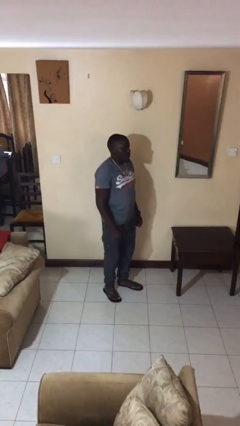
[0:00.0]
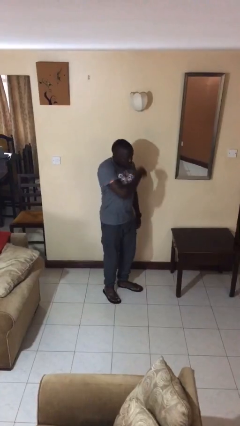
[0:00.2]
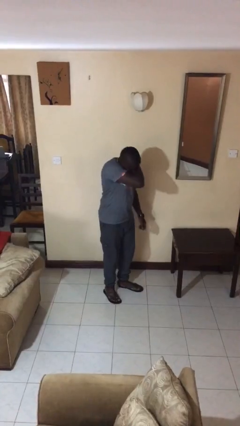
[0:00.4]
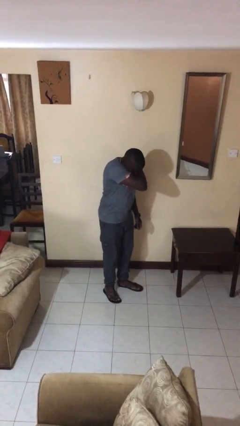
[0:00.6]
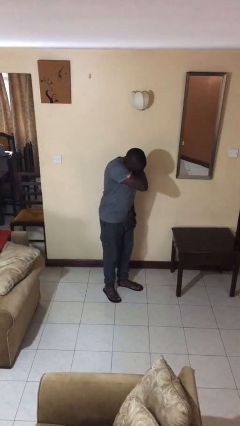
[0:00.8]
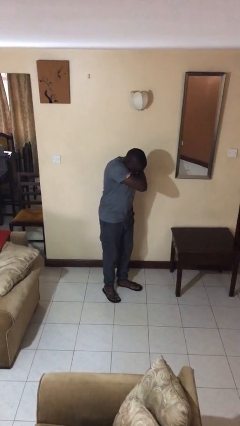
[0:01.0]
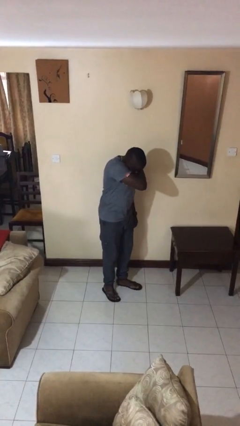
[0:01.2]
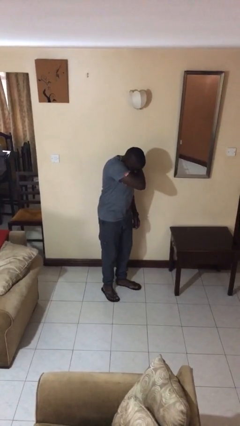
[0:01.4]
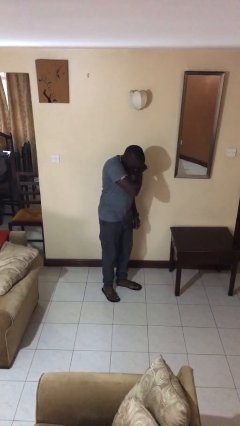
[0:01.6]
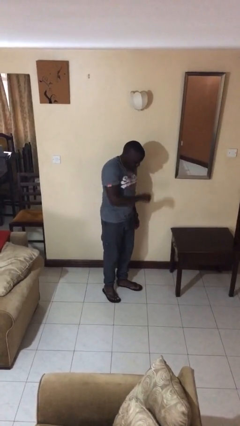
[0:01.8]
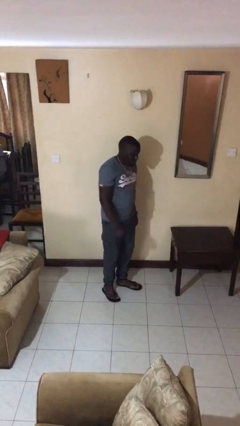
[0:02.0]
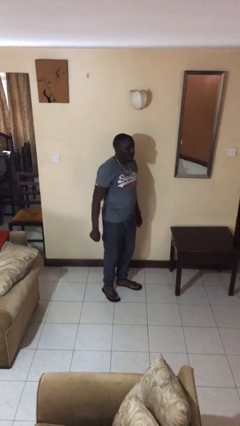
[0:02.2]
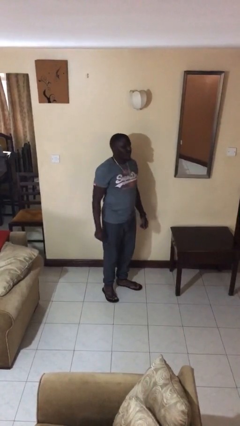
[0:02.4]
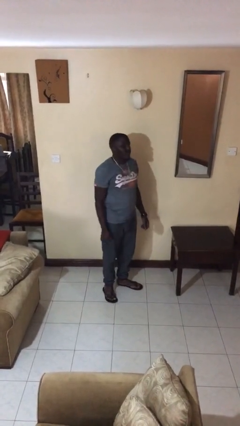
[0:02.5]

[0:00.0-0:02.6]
person sneezes into arm

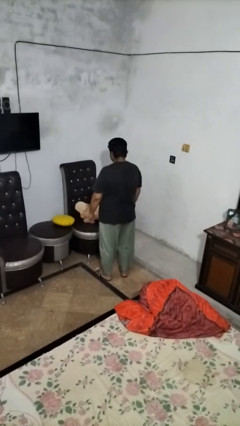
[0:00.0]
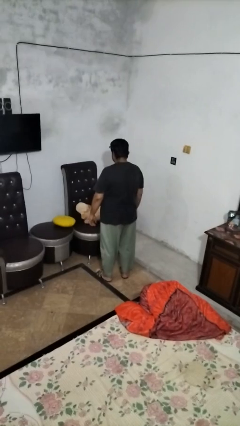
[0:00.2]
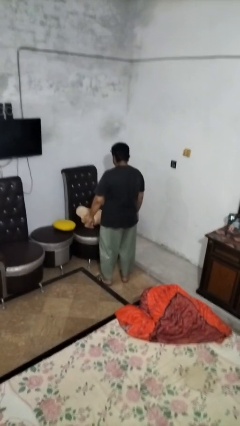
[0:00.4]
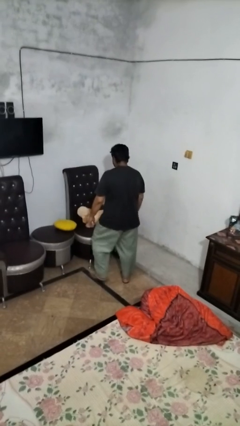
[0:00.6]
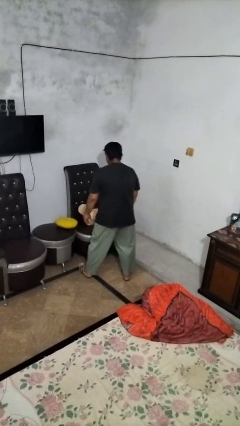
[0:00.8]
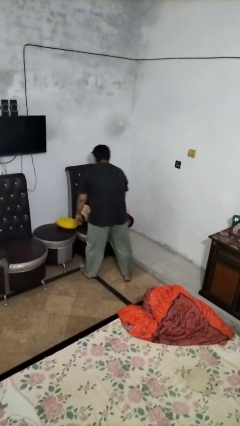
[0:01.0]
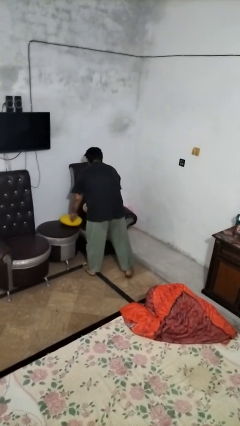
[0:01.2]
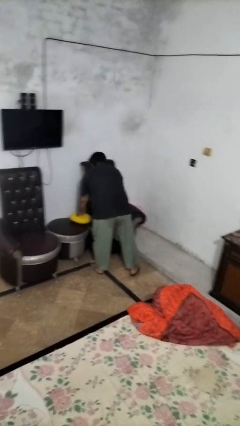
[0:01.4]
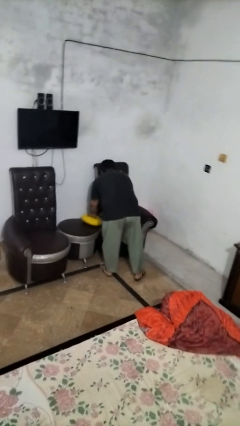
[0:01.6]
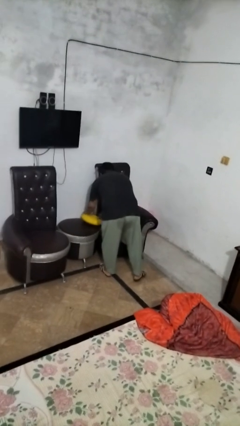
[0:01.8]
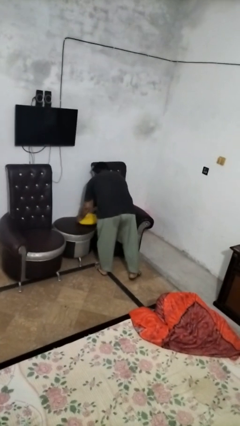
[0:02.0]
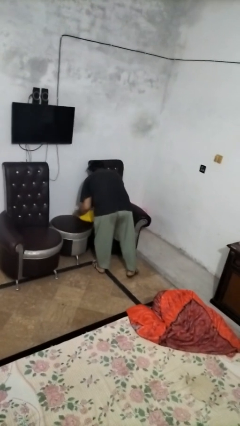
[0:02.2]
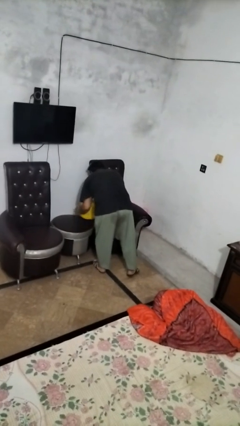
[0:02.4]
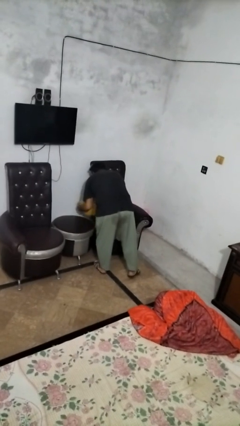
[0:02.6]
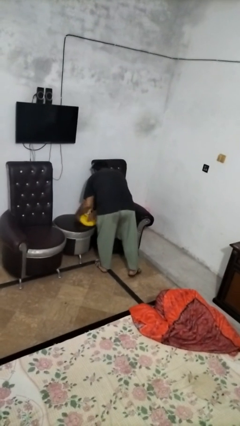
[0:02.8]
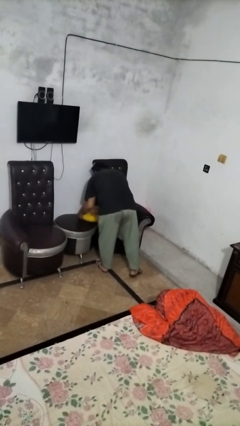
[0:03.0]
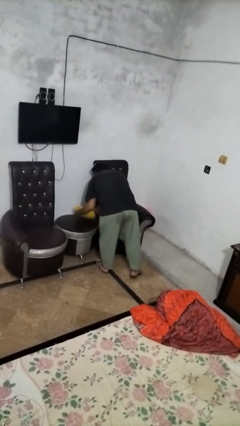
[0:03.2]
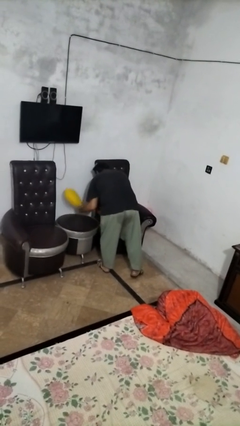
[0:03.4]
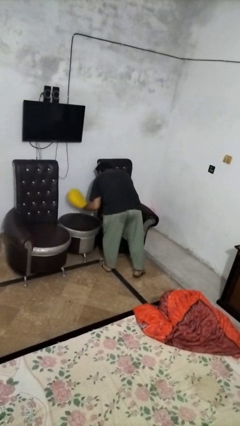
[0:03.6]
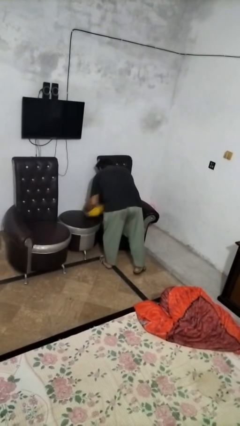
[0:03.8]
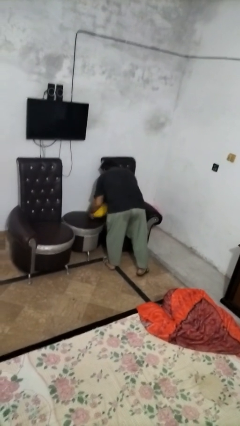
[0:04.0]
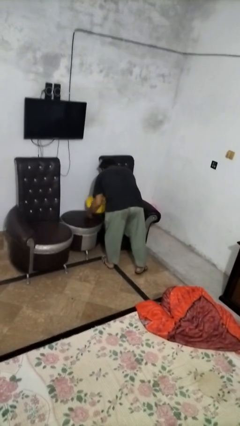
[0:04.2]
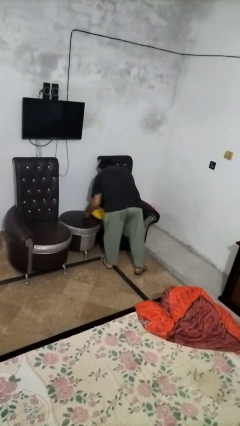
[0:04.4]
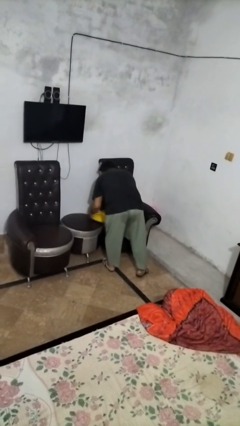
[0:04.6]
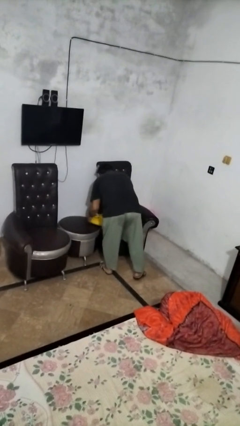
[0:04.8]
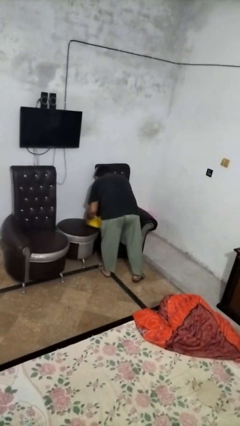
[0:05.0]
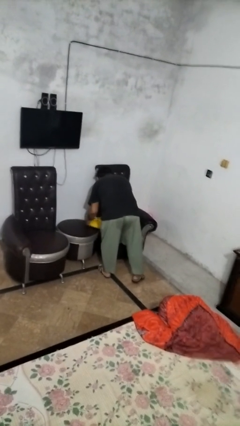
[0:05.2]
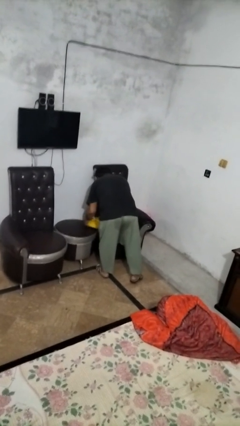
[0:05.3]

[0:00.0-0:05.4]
person searches in couch

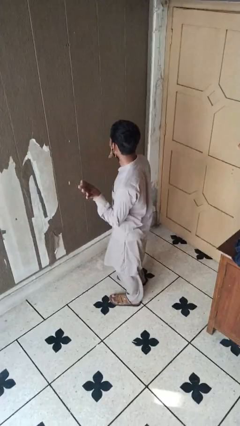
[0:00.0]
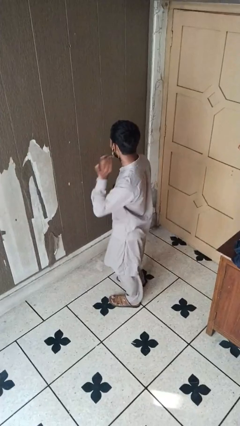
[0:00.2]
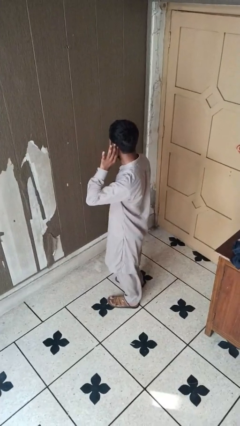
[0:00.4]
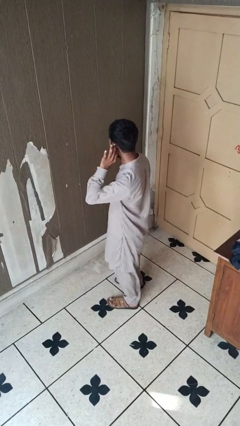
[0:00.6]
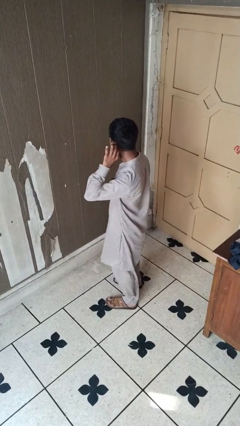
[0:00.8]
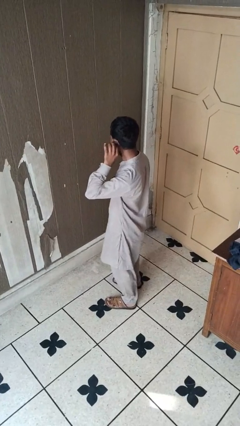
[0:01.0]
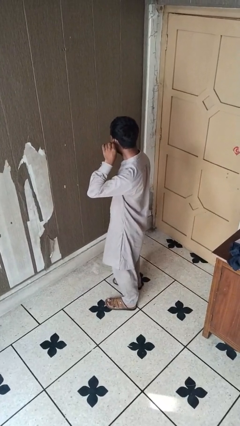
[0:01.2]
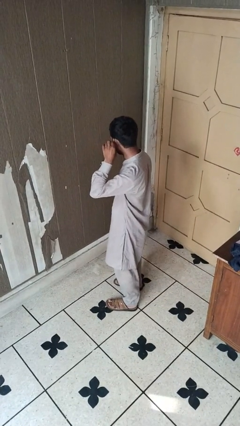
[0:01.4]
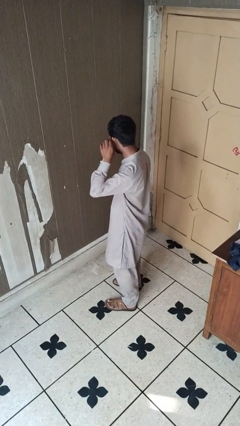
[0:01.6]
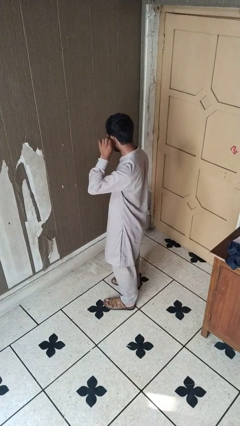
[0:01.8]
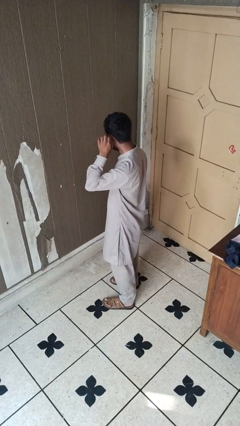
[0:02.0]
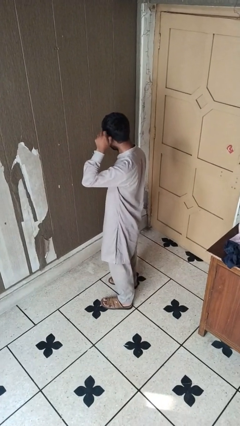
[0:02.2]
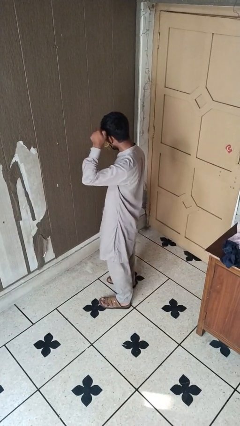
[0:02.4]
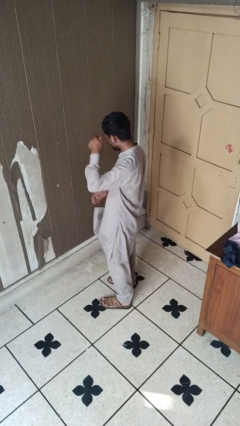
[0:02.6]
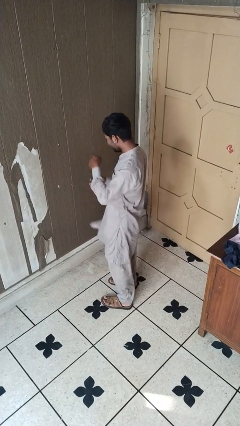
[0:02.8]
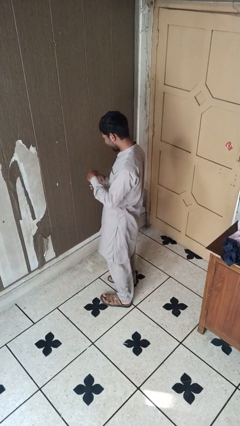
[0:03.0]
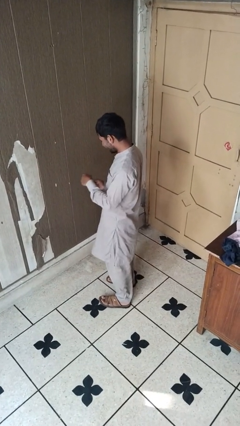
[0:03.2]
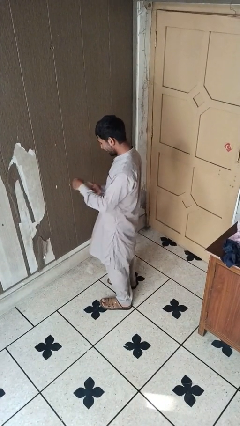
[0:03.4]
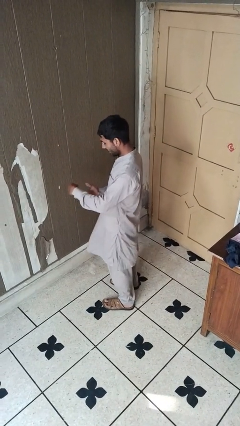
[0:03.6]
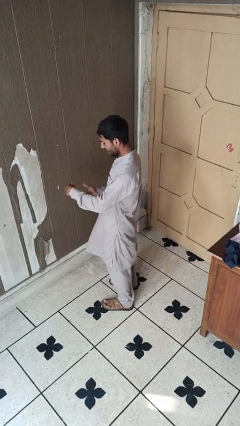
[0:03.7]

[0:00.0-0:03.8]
person takes off earrings

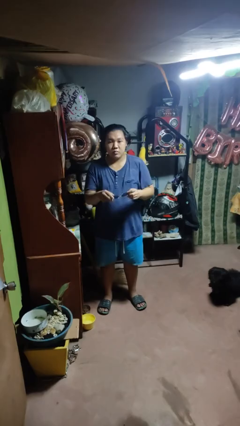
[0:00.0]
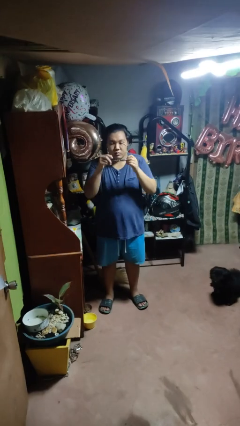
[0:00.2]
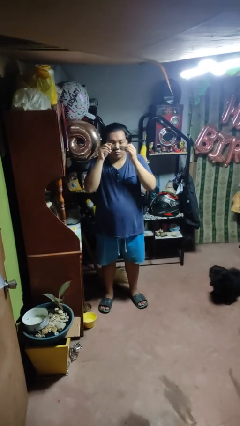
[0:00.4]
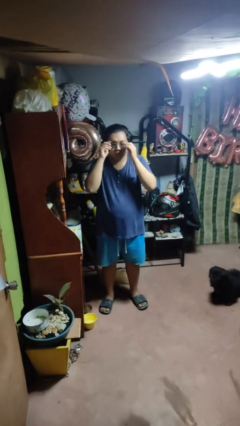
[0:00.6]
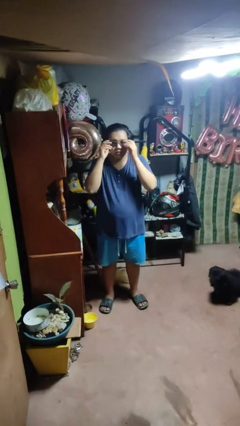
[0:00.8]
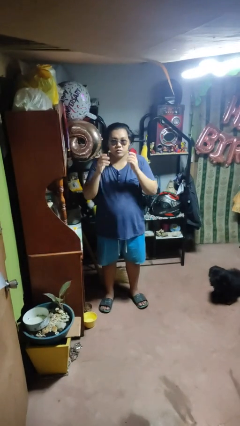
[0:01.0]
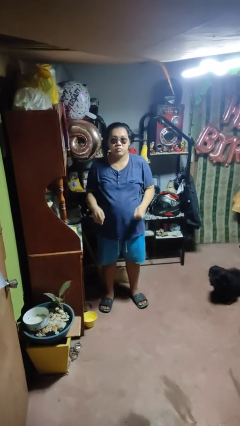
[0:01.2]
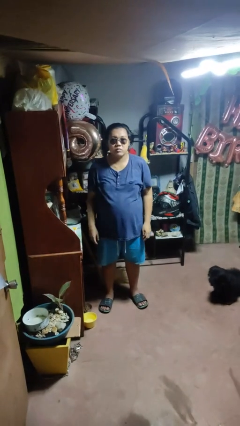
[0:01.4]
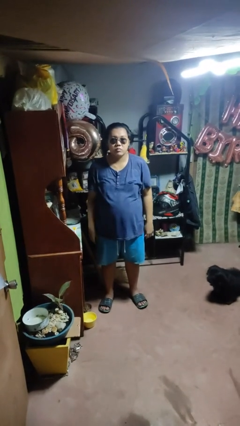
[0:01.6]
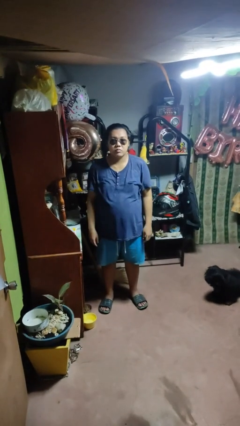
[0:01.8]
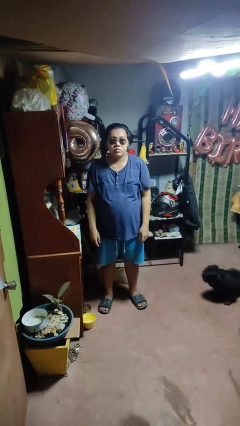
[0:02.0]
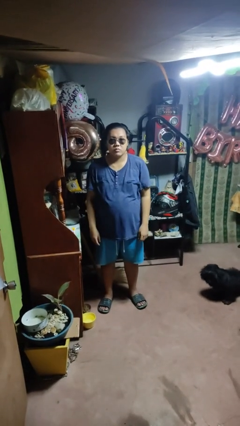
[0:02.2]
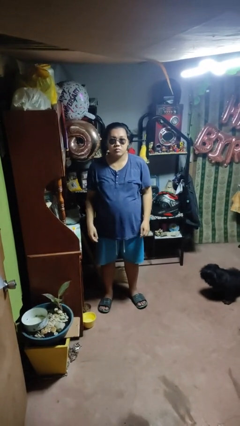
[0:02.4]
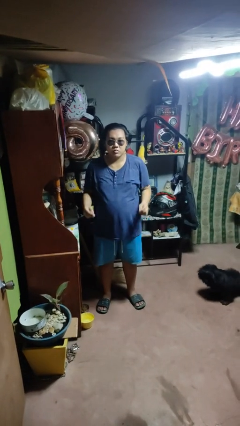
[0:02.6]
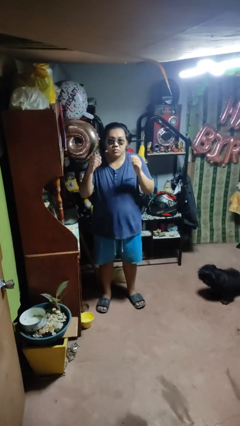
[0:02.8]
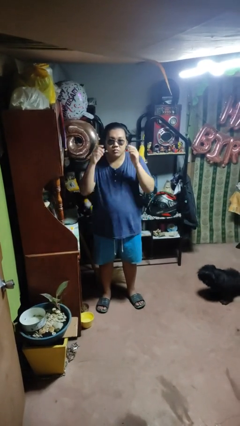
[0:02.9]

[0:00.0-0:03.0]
person puts on sunglasses

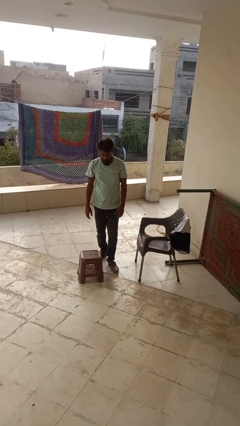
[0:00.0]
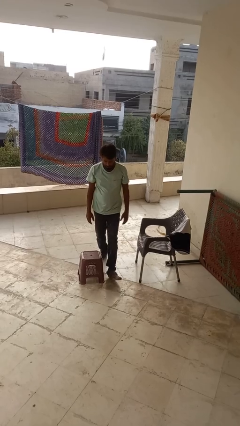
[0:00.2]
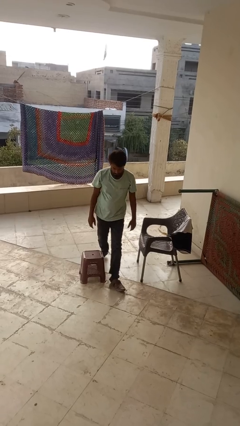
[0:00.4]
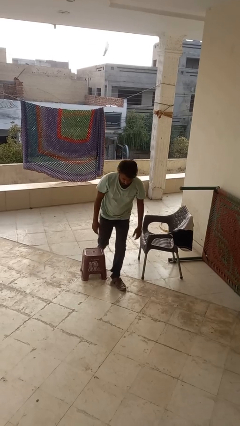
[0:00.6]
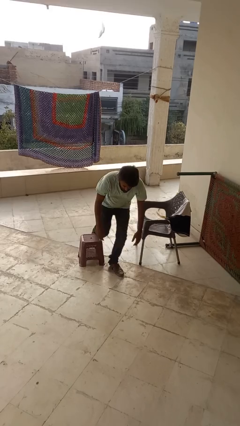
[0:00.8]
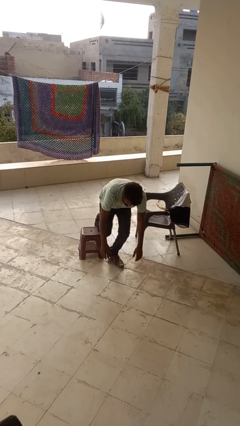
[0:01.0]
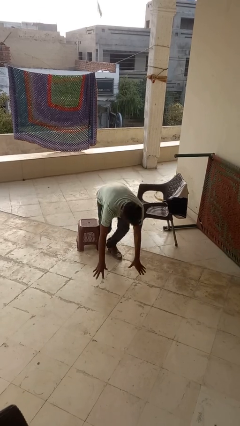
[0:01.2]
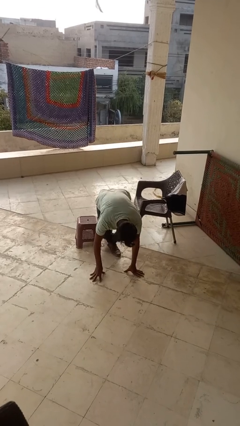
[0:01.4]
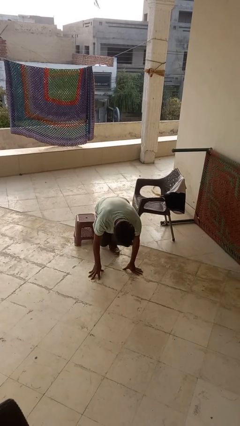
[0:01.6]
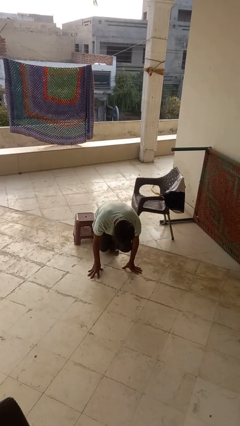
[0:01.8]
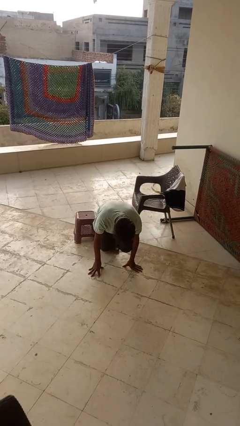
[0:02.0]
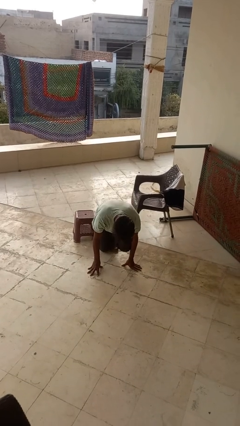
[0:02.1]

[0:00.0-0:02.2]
person trips on object on floor

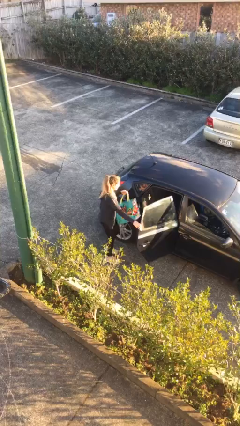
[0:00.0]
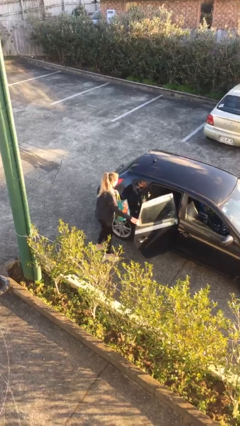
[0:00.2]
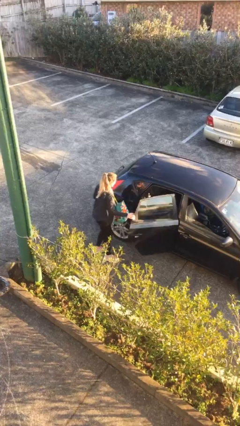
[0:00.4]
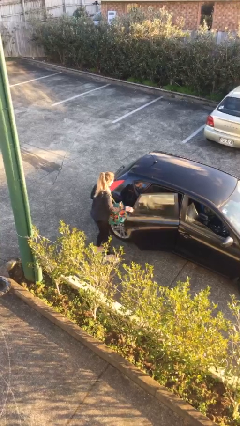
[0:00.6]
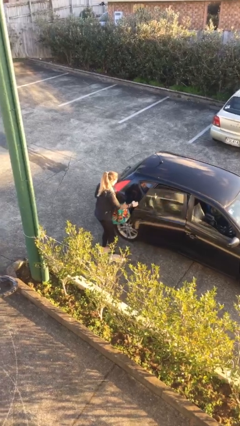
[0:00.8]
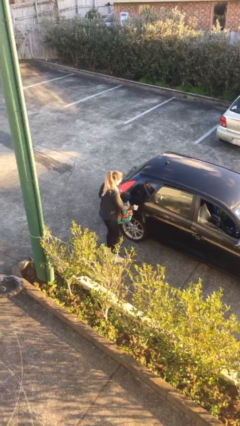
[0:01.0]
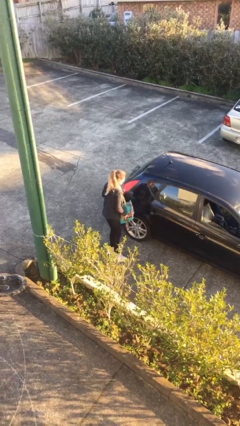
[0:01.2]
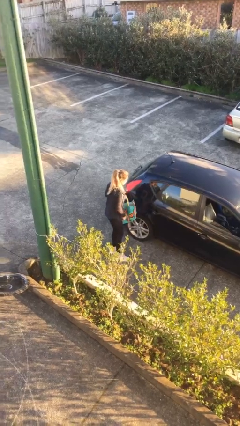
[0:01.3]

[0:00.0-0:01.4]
person closes car door
